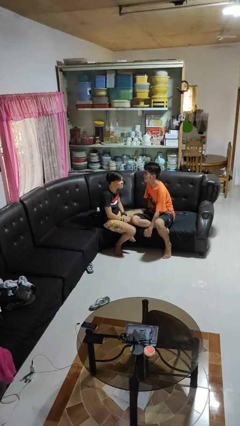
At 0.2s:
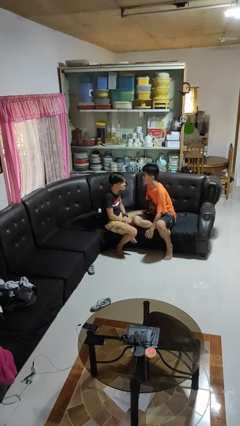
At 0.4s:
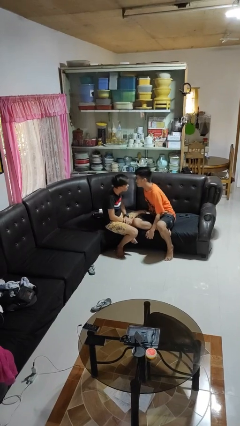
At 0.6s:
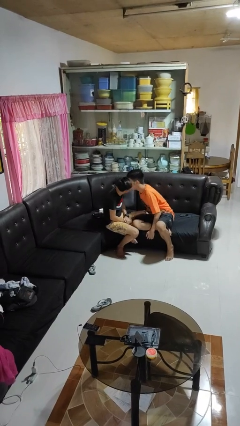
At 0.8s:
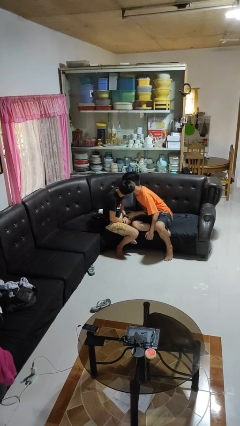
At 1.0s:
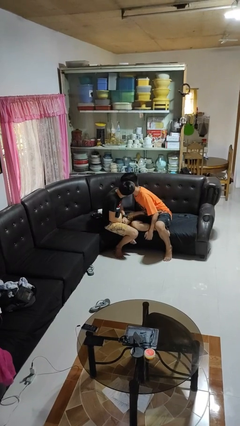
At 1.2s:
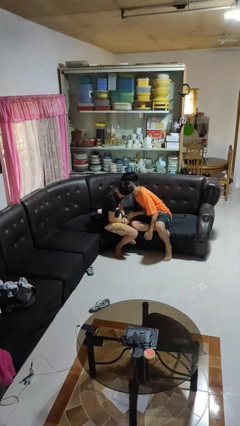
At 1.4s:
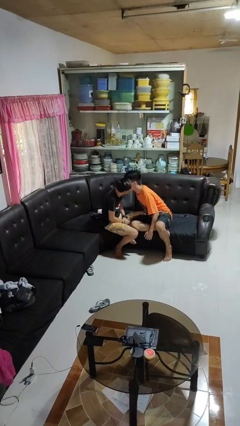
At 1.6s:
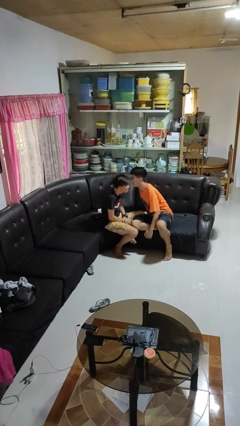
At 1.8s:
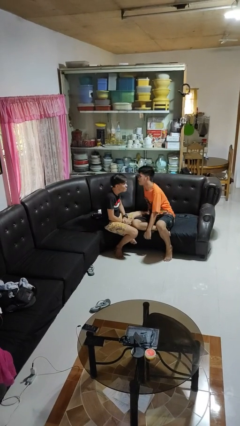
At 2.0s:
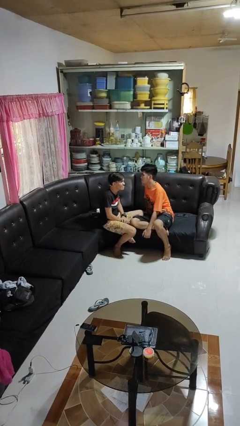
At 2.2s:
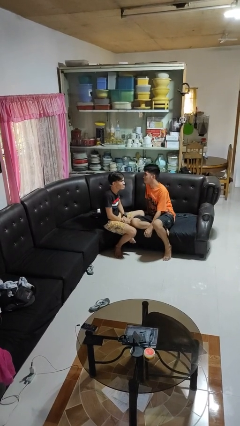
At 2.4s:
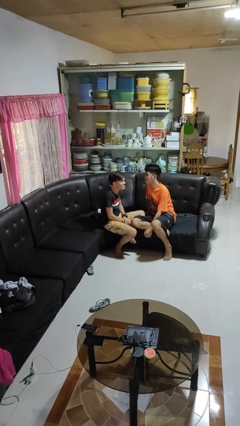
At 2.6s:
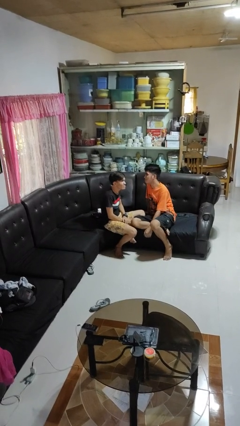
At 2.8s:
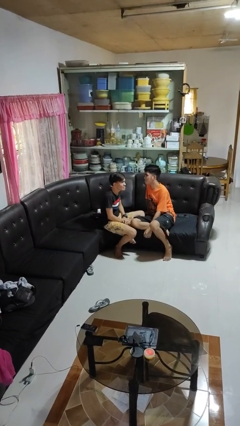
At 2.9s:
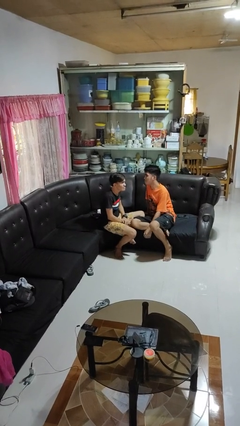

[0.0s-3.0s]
person kisses cheek of person

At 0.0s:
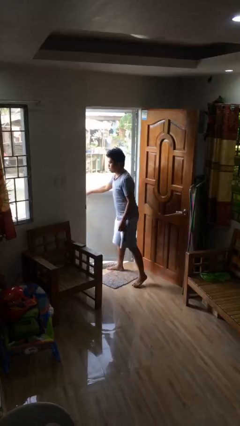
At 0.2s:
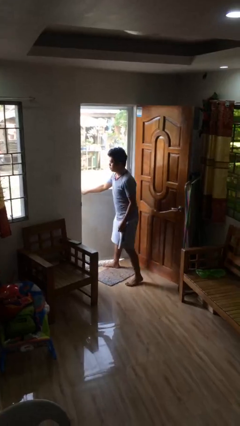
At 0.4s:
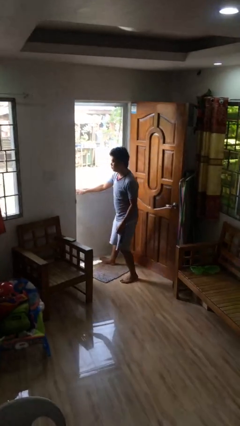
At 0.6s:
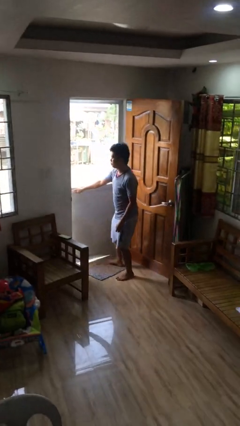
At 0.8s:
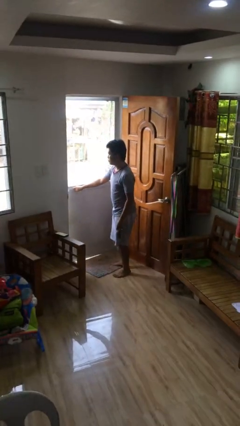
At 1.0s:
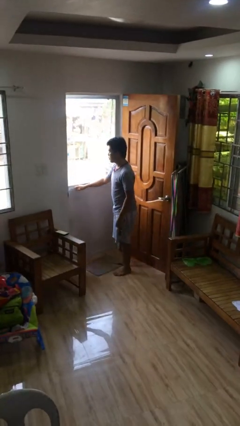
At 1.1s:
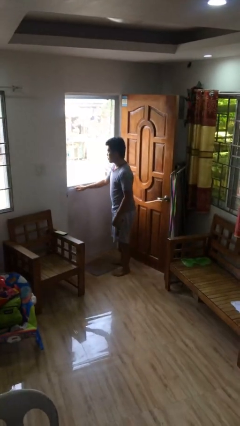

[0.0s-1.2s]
person closes facility door

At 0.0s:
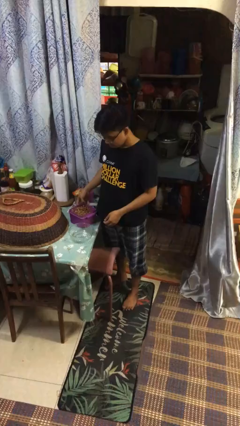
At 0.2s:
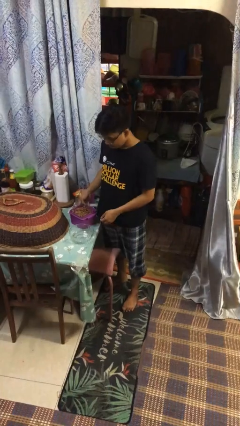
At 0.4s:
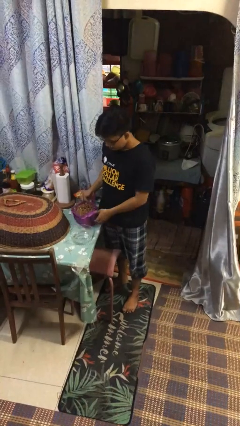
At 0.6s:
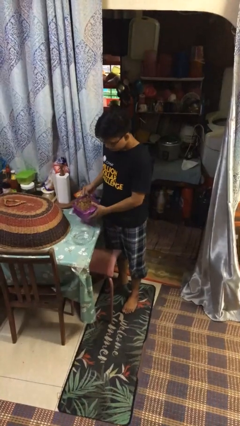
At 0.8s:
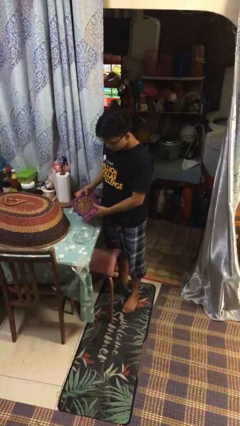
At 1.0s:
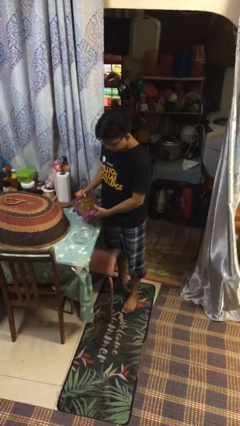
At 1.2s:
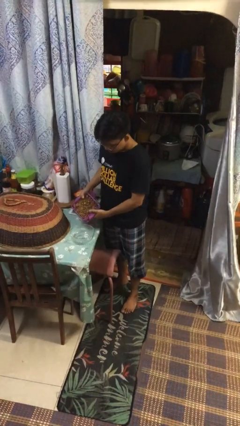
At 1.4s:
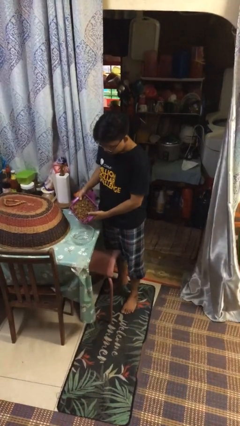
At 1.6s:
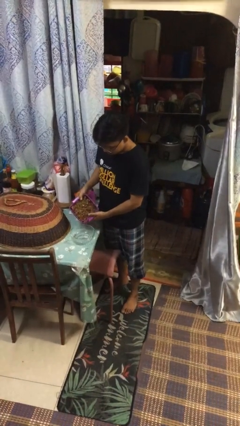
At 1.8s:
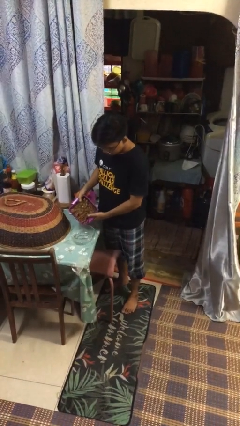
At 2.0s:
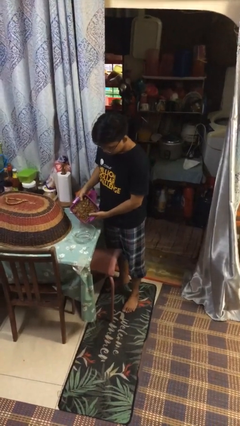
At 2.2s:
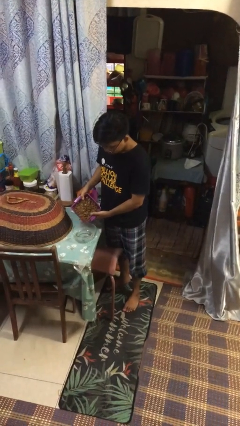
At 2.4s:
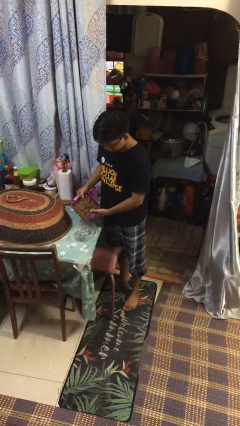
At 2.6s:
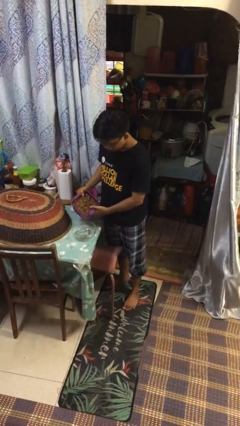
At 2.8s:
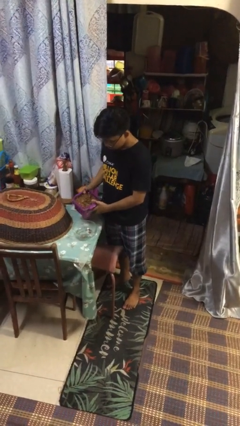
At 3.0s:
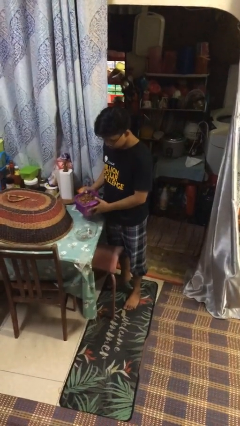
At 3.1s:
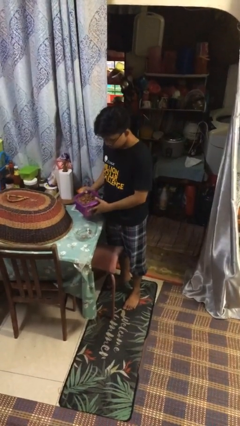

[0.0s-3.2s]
person pours into bowl

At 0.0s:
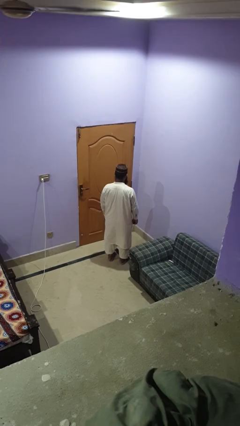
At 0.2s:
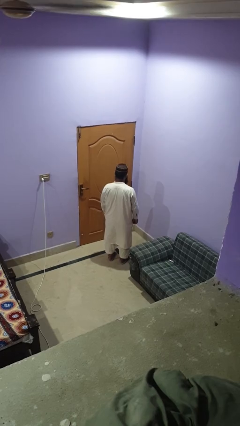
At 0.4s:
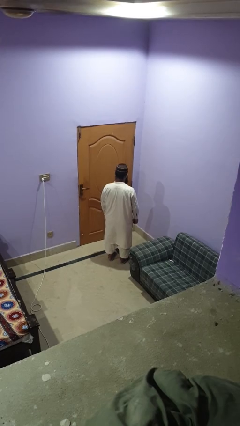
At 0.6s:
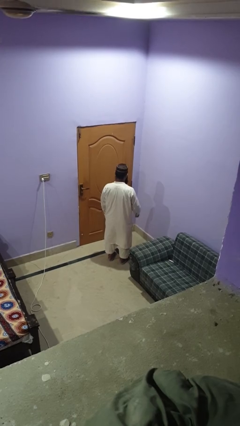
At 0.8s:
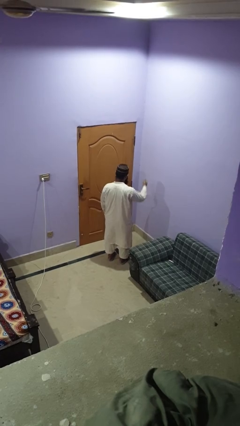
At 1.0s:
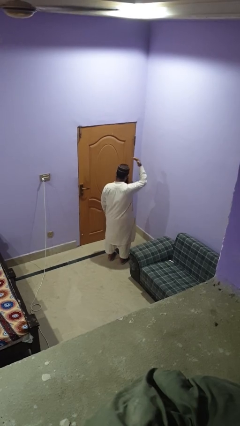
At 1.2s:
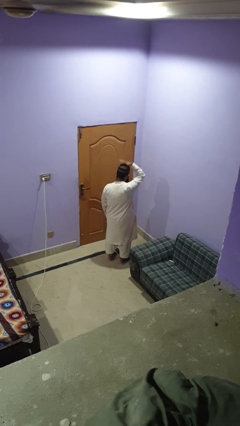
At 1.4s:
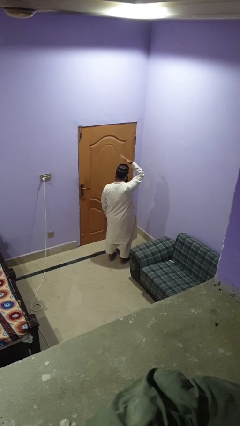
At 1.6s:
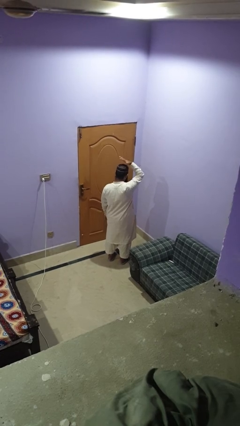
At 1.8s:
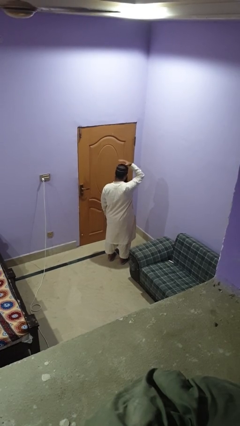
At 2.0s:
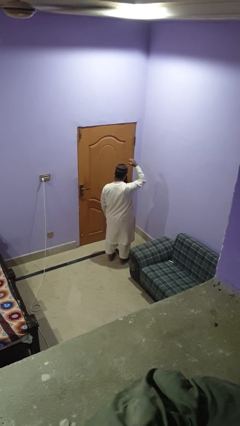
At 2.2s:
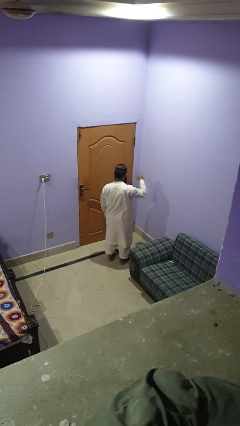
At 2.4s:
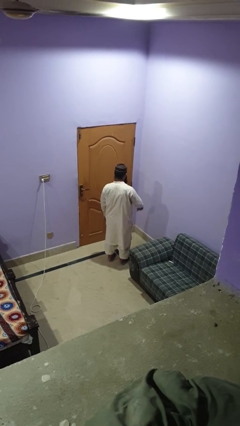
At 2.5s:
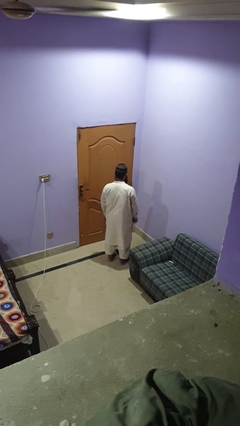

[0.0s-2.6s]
person pats head

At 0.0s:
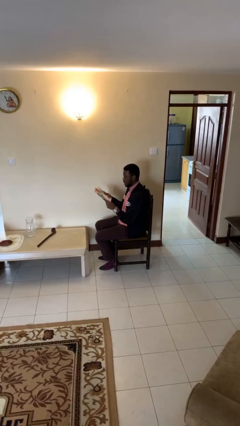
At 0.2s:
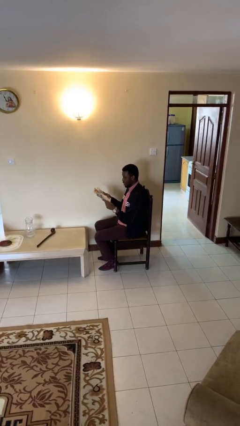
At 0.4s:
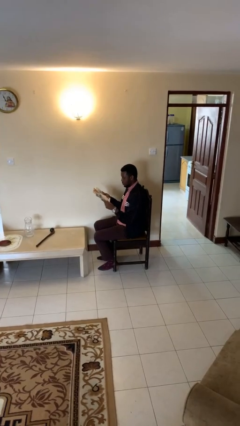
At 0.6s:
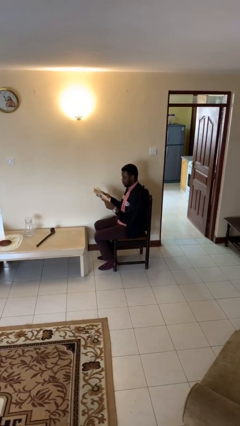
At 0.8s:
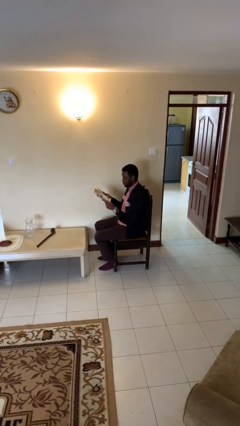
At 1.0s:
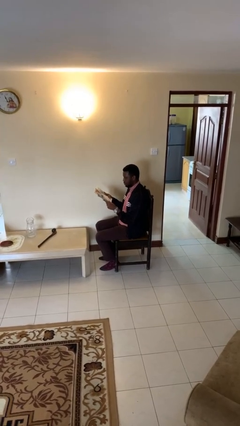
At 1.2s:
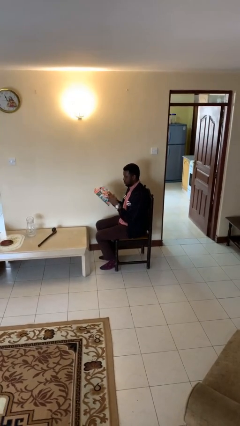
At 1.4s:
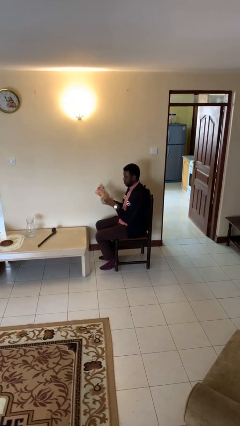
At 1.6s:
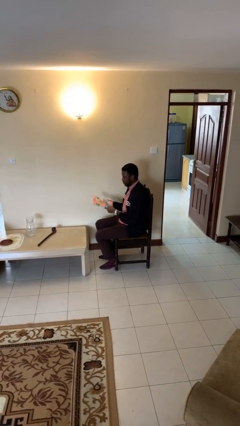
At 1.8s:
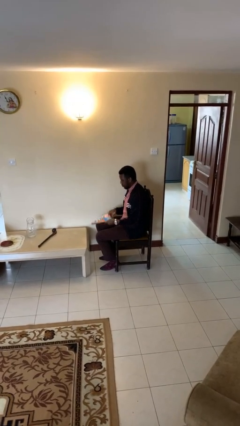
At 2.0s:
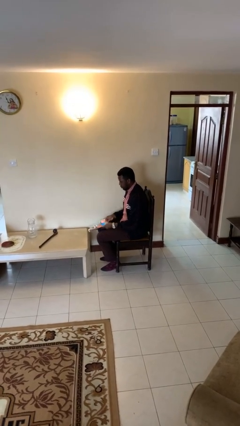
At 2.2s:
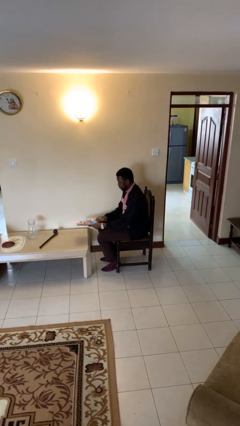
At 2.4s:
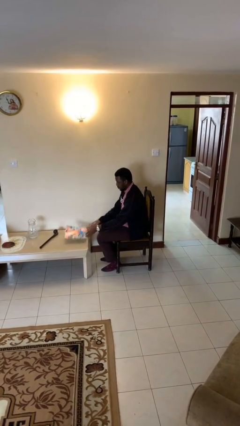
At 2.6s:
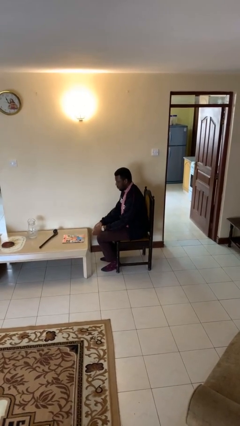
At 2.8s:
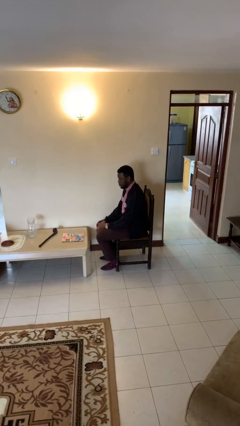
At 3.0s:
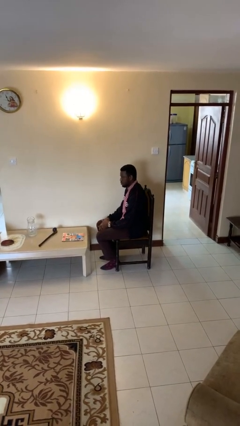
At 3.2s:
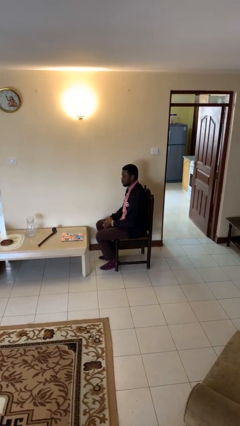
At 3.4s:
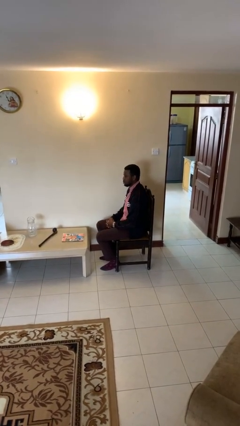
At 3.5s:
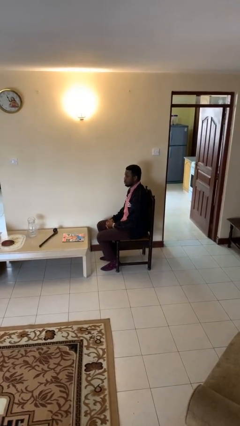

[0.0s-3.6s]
person puts down object on table

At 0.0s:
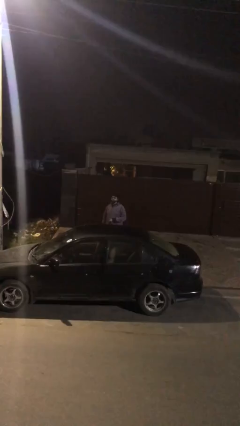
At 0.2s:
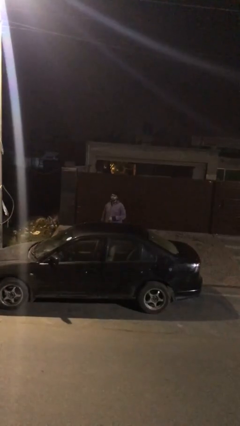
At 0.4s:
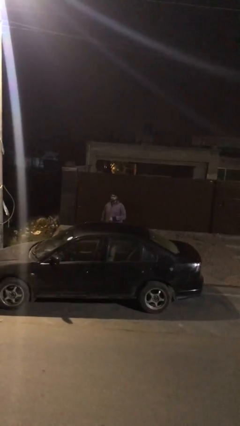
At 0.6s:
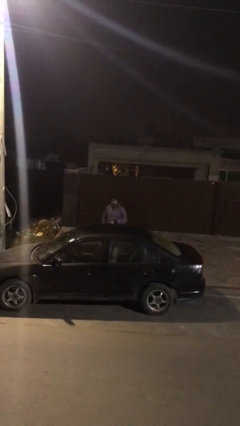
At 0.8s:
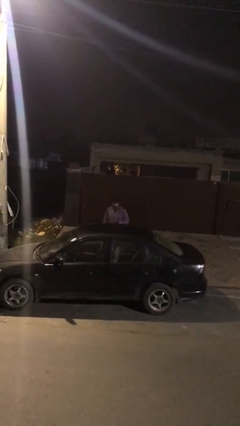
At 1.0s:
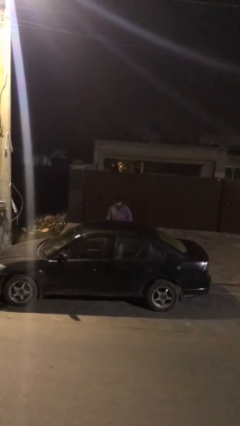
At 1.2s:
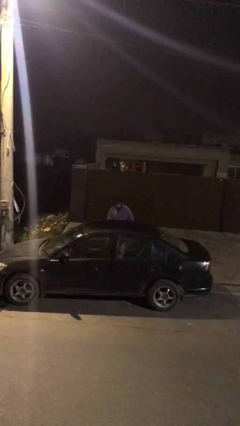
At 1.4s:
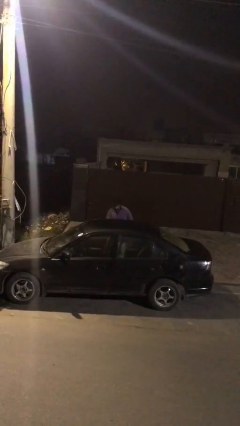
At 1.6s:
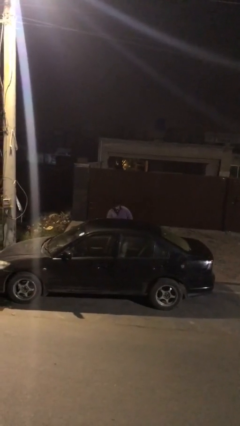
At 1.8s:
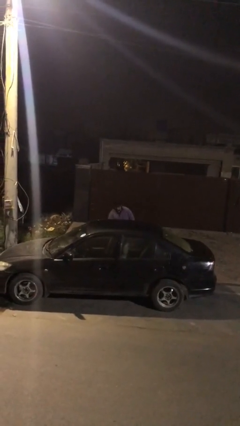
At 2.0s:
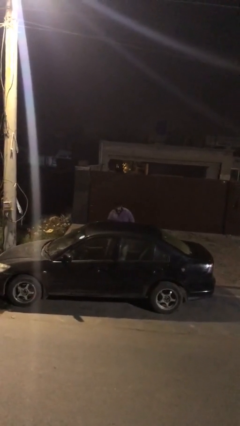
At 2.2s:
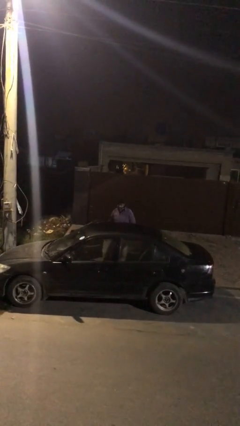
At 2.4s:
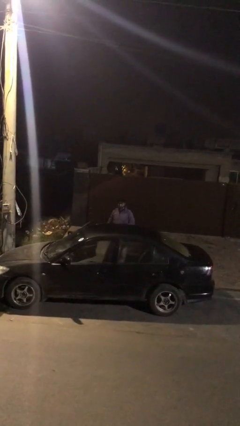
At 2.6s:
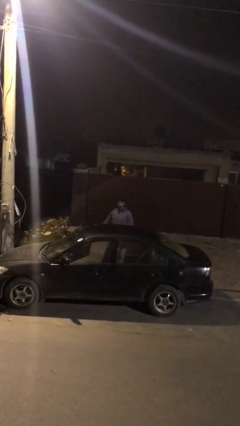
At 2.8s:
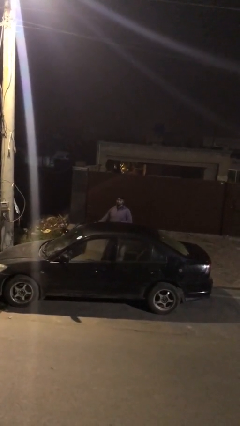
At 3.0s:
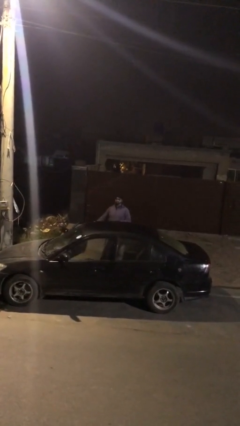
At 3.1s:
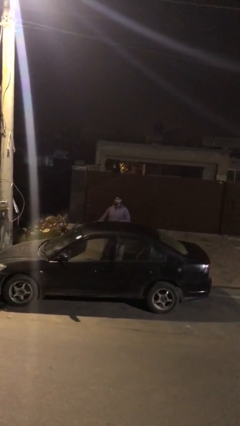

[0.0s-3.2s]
person opens car door

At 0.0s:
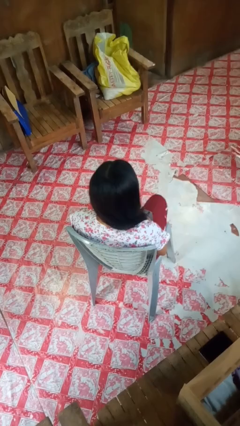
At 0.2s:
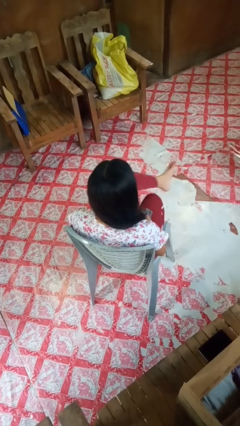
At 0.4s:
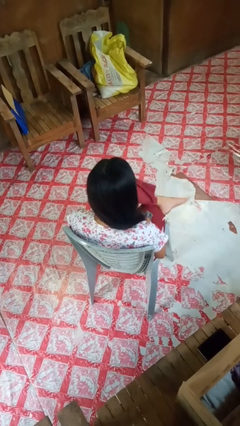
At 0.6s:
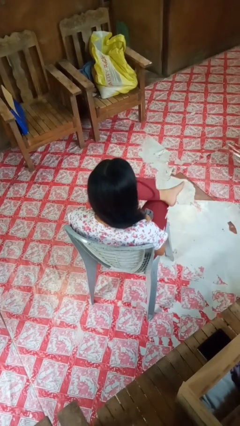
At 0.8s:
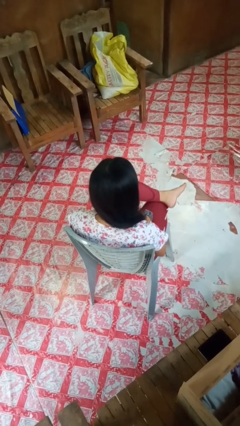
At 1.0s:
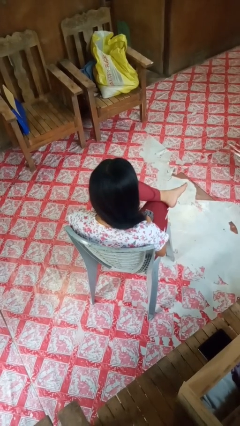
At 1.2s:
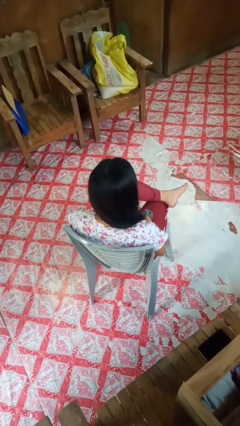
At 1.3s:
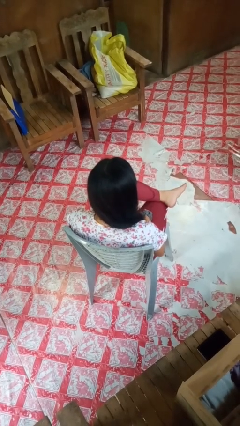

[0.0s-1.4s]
person crosses legs
